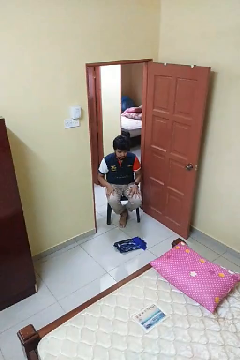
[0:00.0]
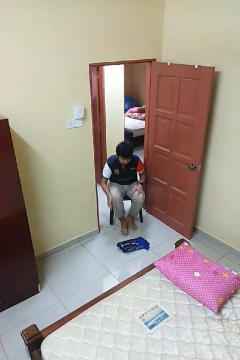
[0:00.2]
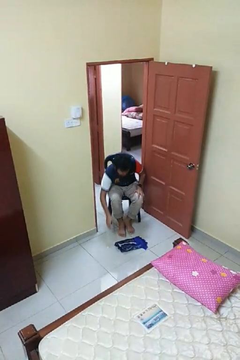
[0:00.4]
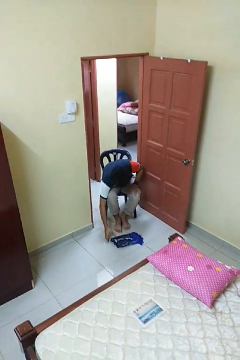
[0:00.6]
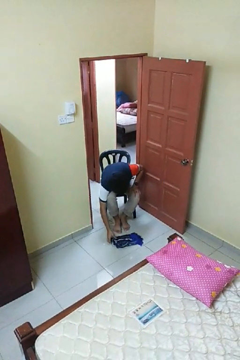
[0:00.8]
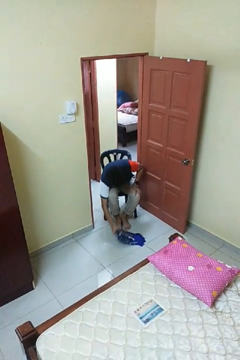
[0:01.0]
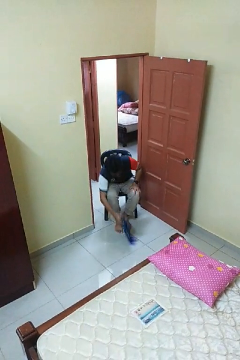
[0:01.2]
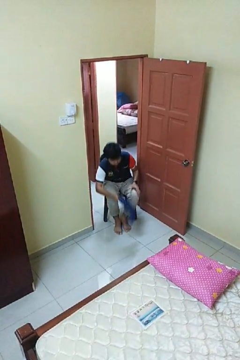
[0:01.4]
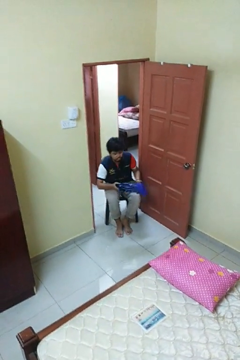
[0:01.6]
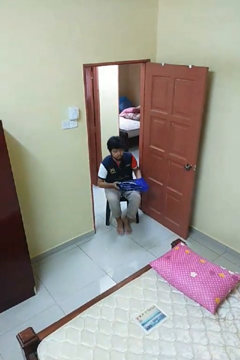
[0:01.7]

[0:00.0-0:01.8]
person picks up object from floor

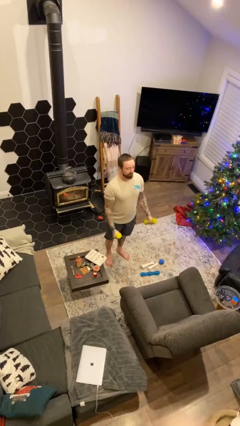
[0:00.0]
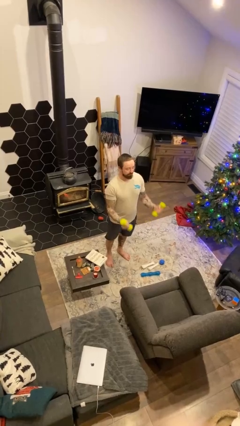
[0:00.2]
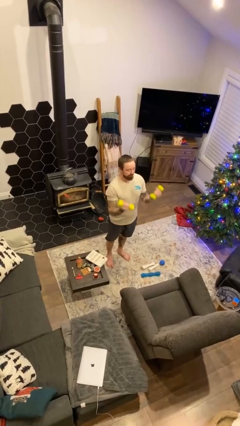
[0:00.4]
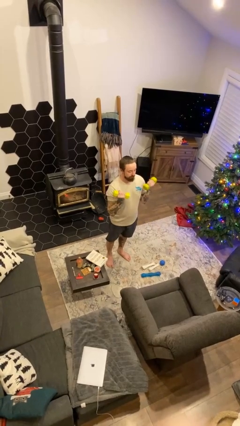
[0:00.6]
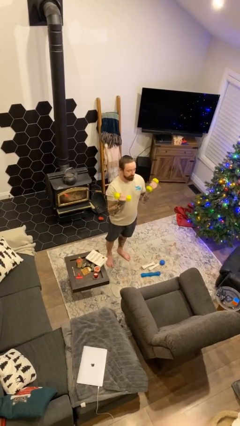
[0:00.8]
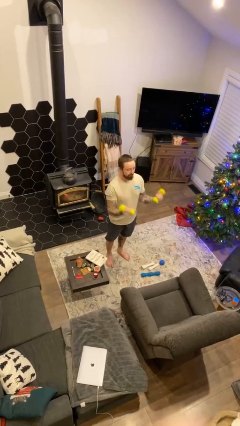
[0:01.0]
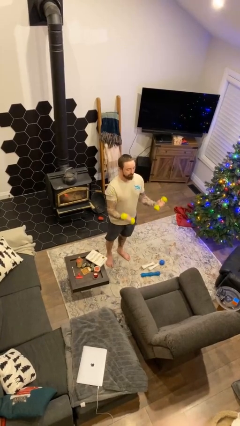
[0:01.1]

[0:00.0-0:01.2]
person lifts dumbbells

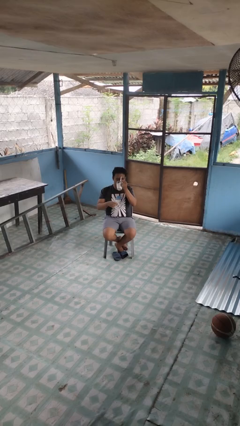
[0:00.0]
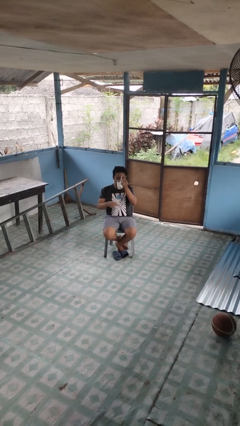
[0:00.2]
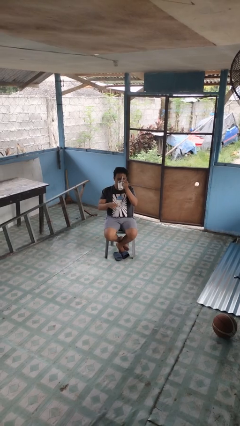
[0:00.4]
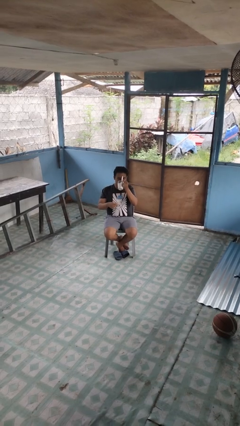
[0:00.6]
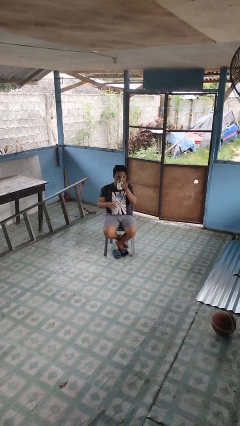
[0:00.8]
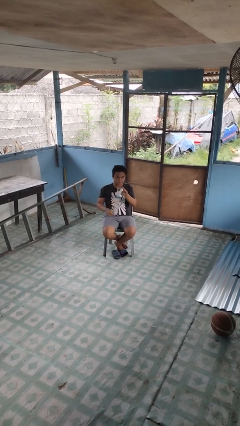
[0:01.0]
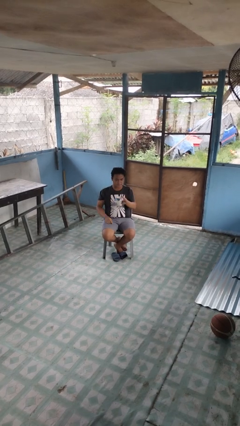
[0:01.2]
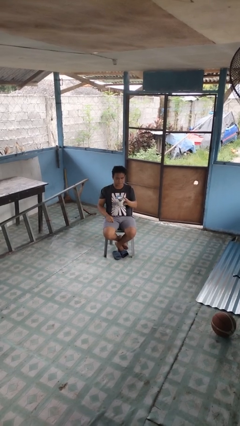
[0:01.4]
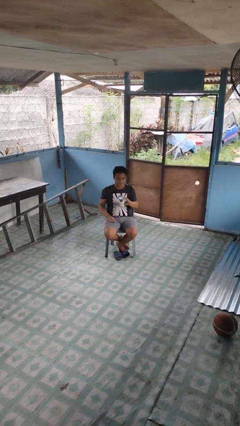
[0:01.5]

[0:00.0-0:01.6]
person drinks from mug

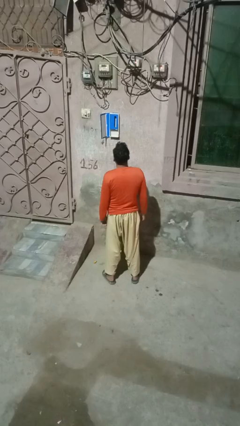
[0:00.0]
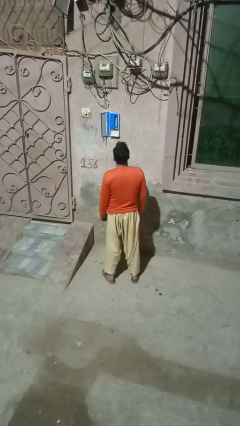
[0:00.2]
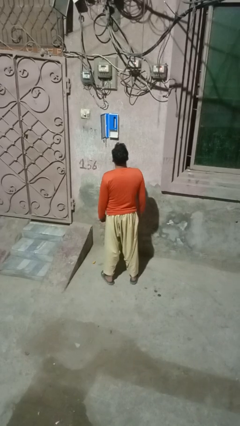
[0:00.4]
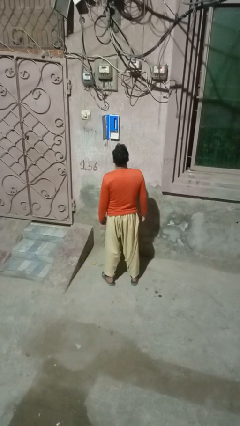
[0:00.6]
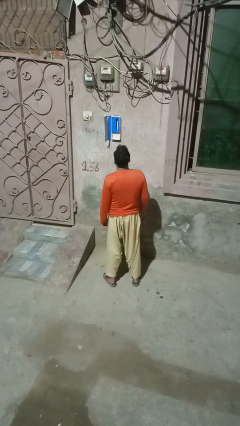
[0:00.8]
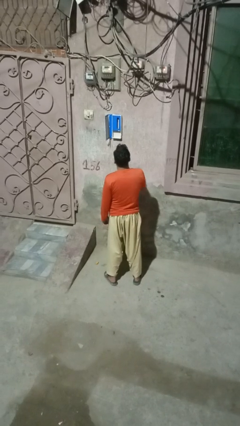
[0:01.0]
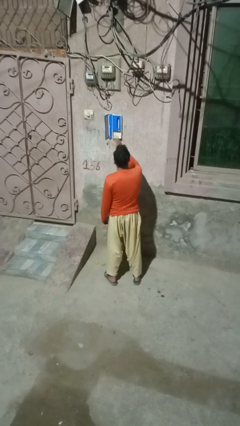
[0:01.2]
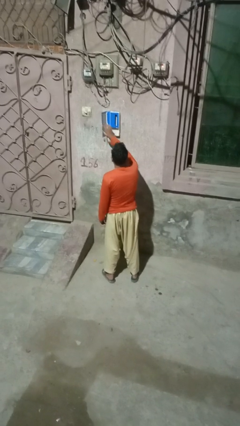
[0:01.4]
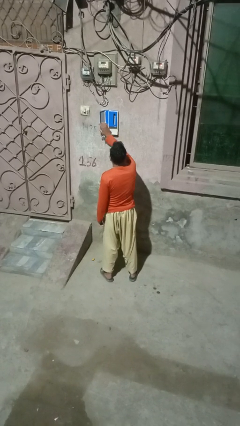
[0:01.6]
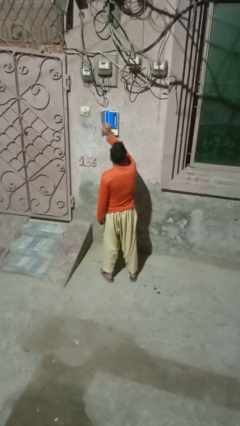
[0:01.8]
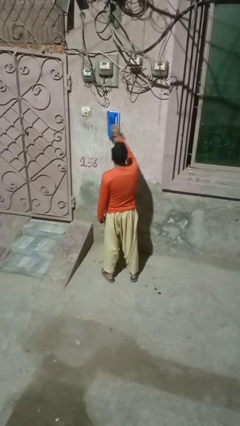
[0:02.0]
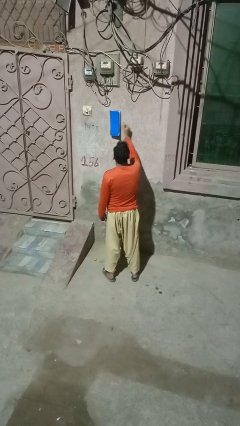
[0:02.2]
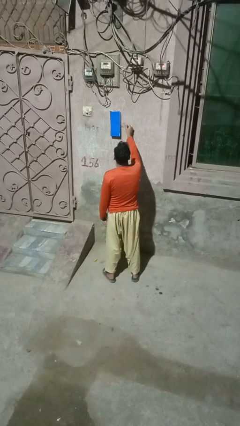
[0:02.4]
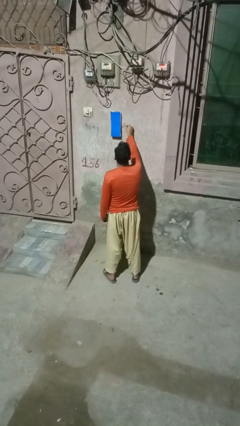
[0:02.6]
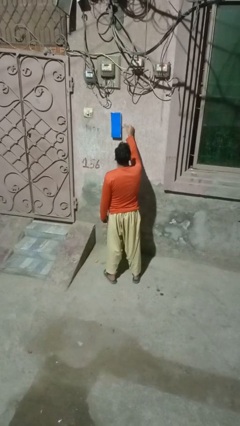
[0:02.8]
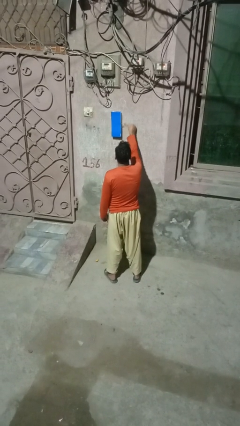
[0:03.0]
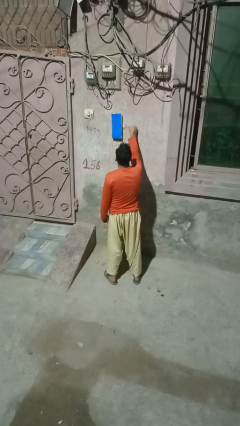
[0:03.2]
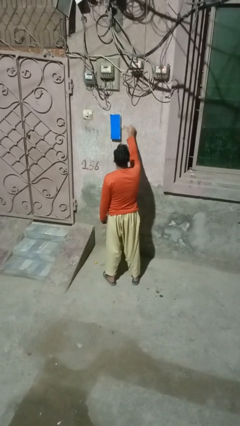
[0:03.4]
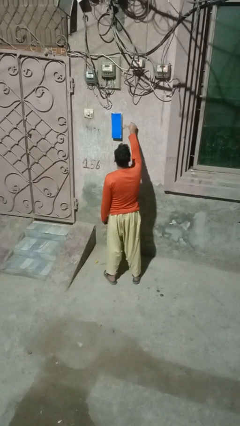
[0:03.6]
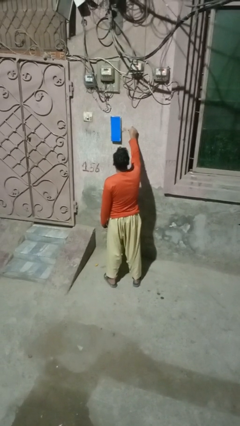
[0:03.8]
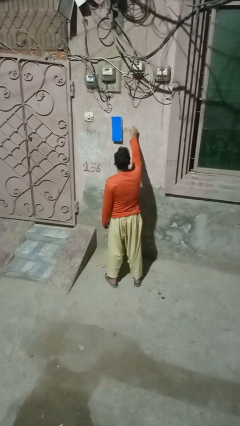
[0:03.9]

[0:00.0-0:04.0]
person closes mailbox

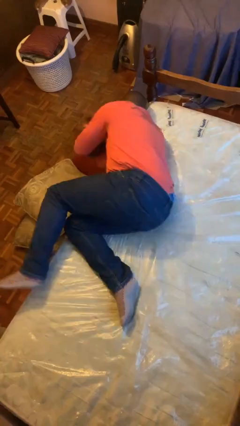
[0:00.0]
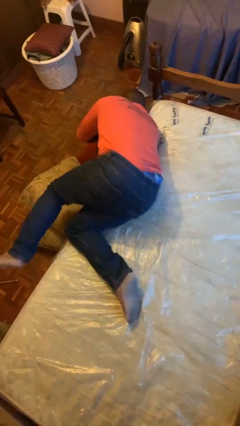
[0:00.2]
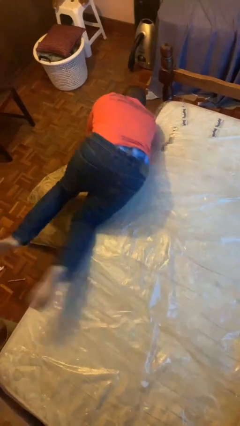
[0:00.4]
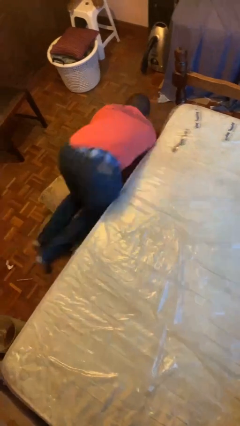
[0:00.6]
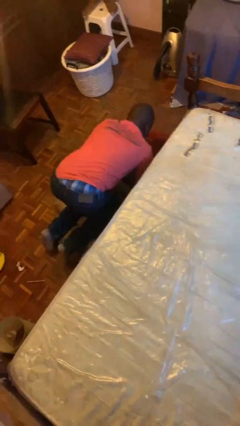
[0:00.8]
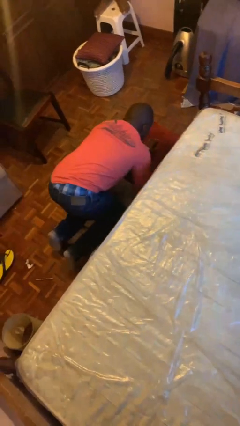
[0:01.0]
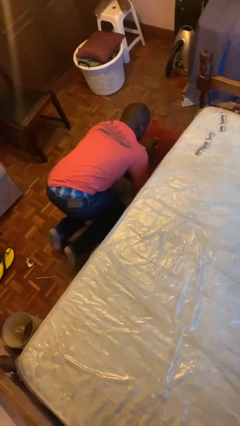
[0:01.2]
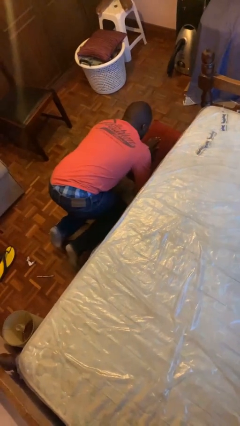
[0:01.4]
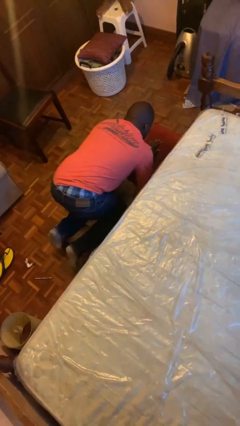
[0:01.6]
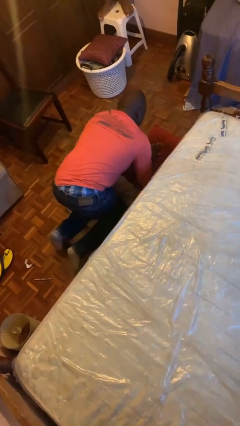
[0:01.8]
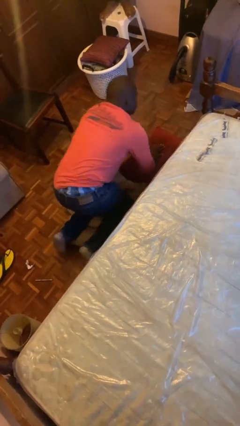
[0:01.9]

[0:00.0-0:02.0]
person falls from bed

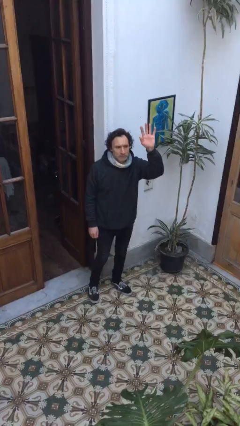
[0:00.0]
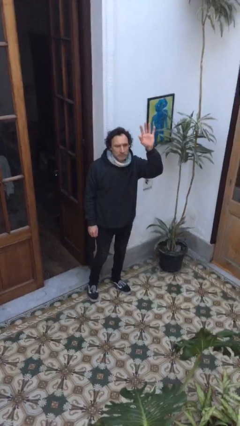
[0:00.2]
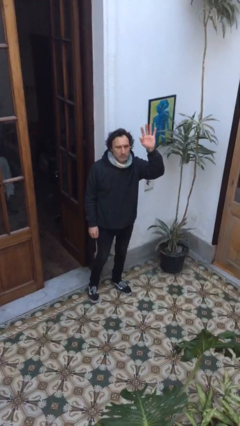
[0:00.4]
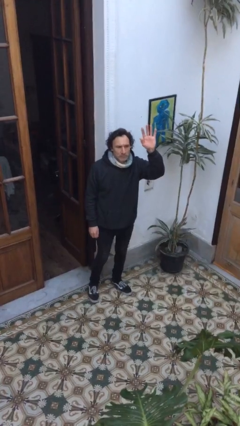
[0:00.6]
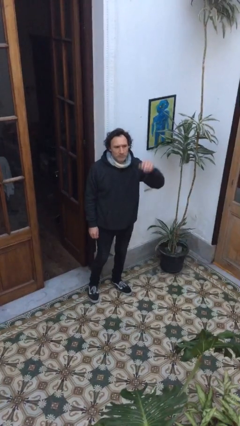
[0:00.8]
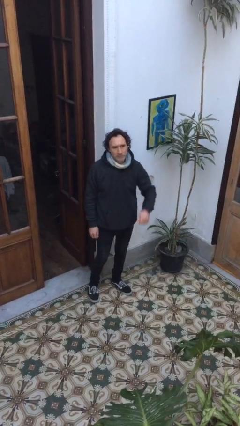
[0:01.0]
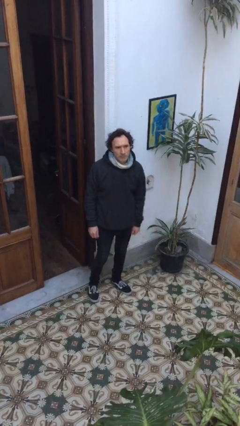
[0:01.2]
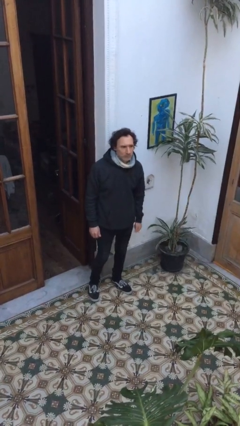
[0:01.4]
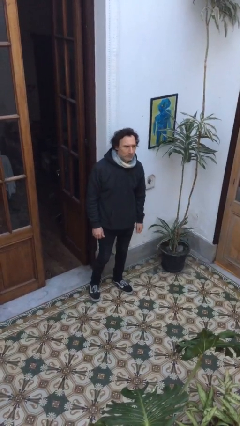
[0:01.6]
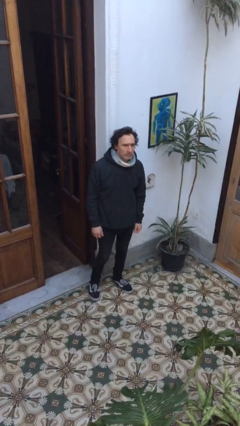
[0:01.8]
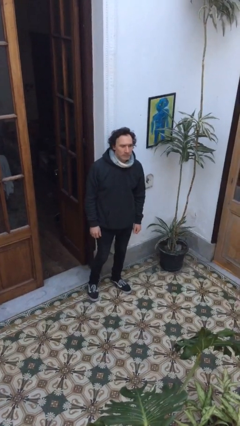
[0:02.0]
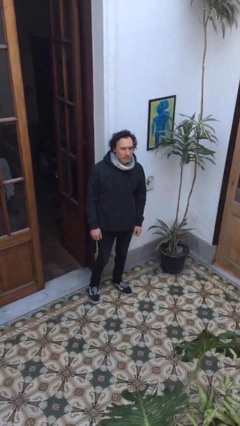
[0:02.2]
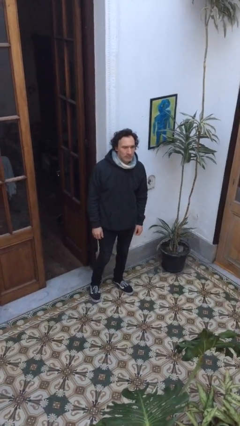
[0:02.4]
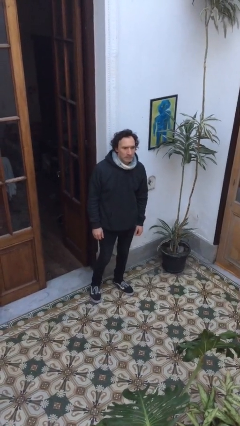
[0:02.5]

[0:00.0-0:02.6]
person gestures lower hand

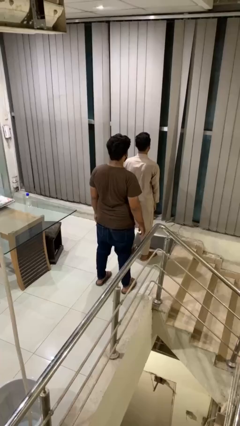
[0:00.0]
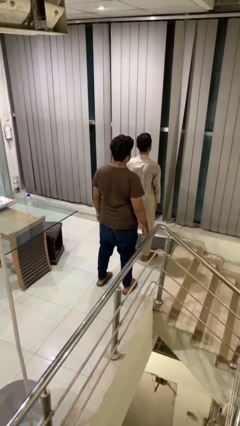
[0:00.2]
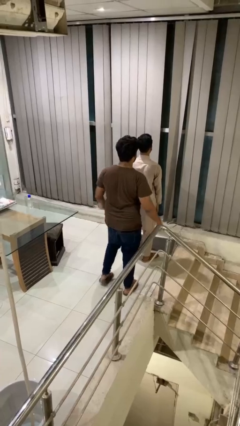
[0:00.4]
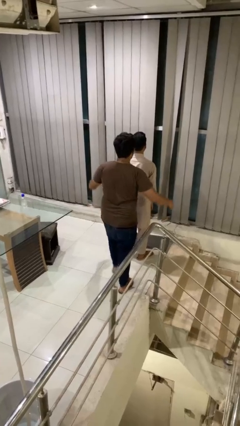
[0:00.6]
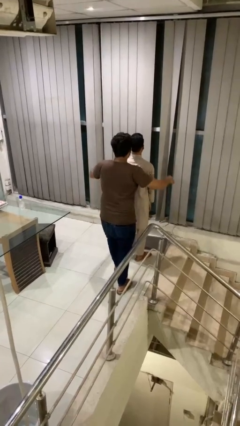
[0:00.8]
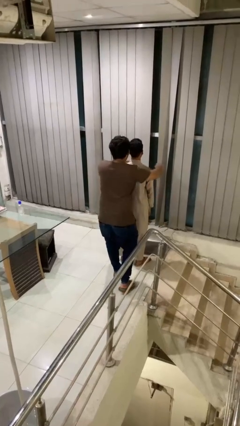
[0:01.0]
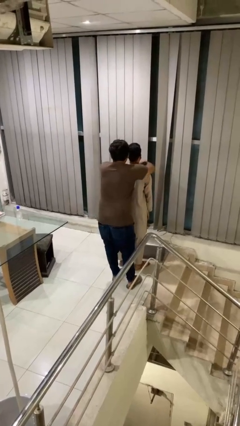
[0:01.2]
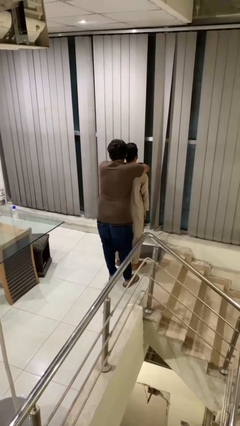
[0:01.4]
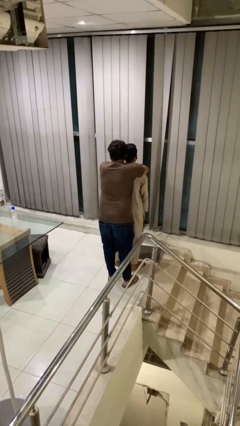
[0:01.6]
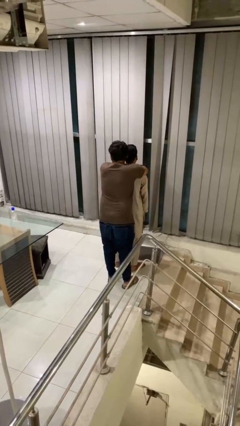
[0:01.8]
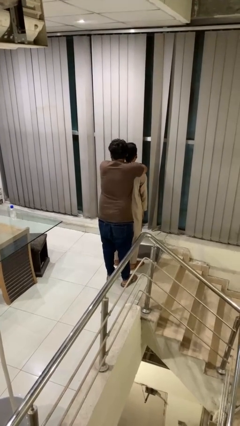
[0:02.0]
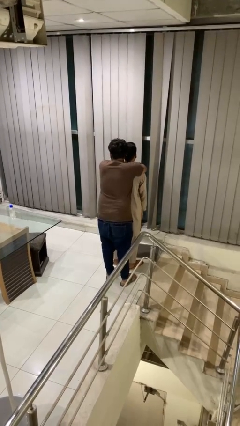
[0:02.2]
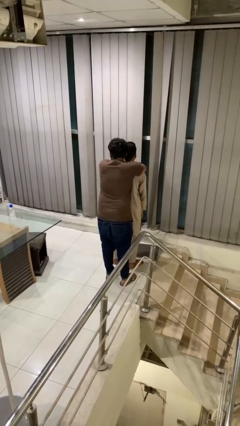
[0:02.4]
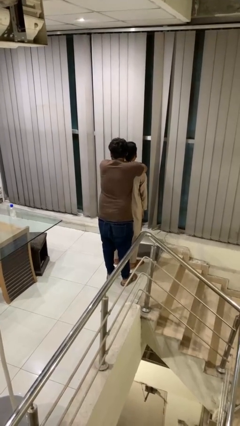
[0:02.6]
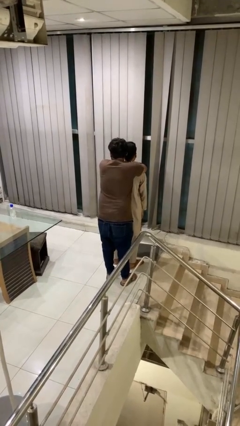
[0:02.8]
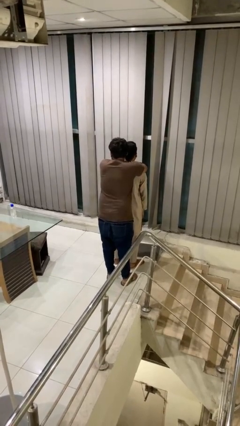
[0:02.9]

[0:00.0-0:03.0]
person hugs person from behind

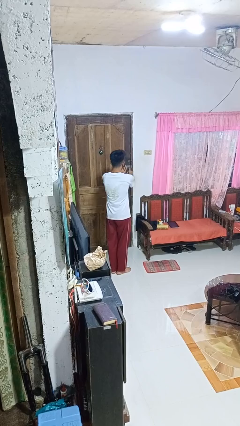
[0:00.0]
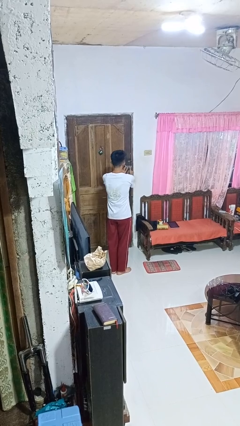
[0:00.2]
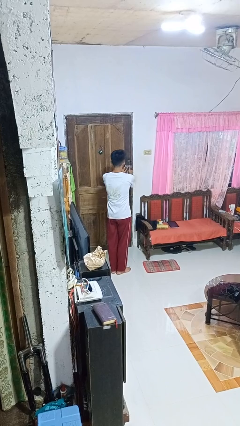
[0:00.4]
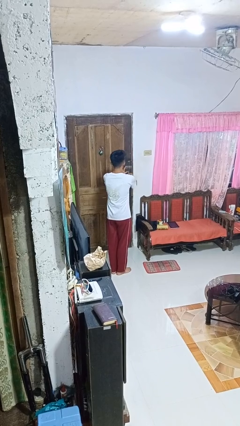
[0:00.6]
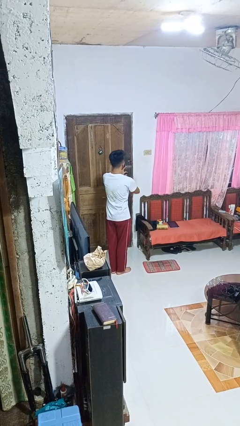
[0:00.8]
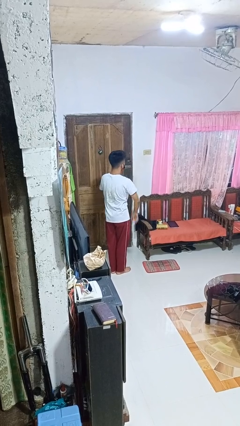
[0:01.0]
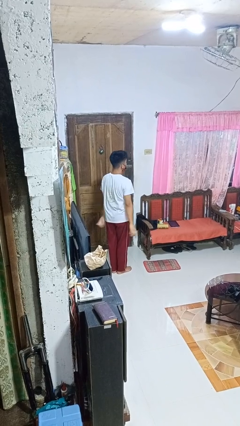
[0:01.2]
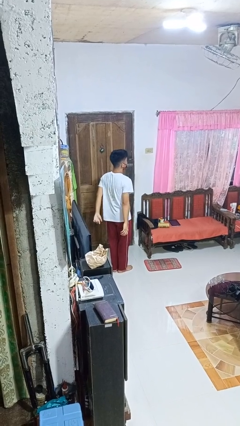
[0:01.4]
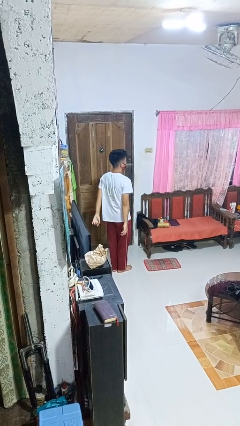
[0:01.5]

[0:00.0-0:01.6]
person locks door with keys
